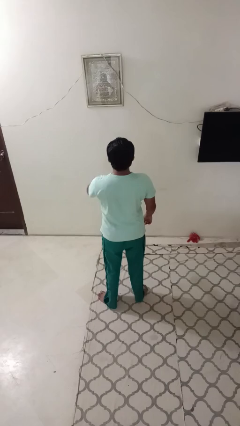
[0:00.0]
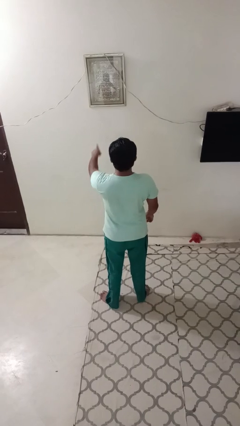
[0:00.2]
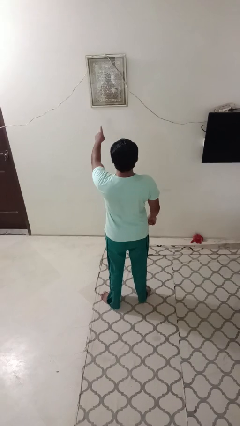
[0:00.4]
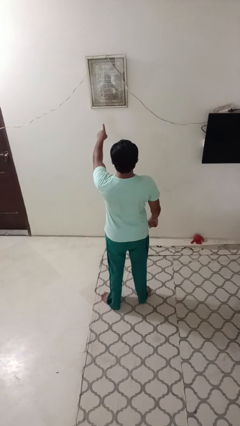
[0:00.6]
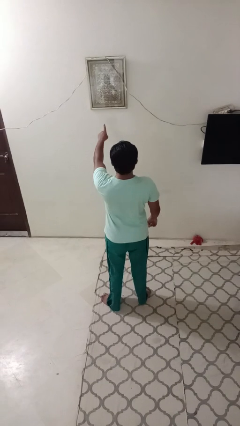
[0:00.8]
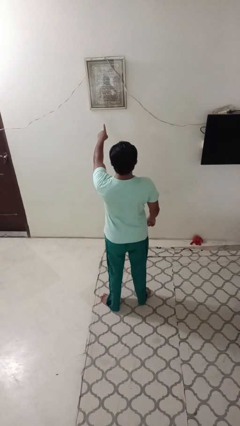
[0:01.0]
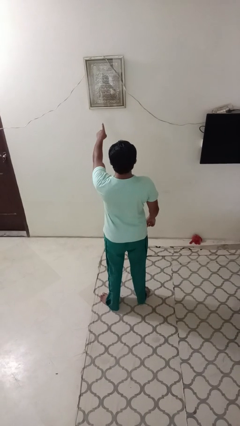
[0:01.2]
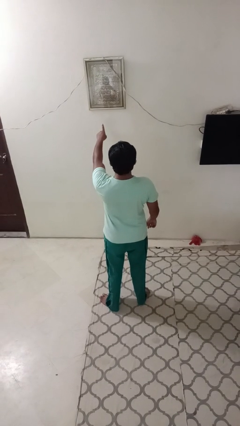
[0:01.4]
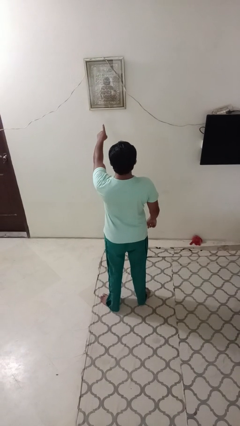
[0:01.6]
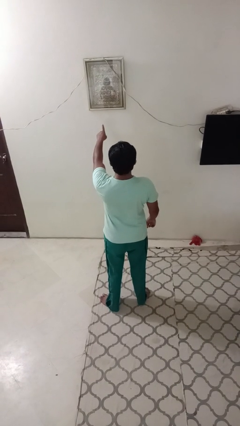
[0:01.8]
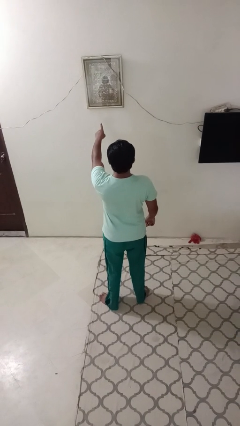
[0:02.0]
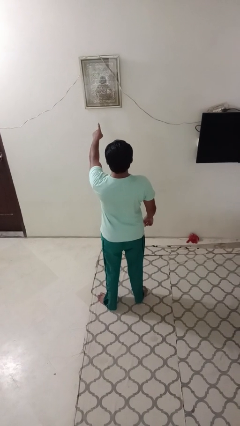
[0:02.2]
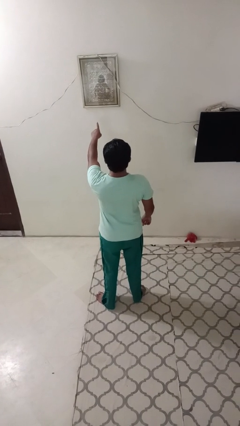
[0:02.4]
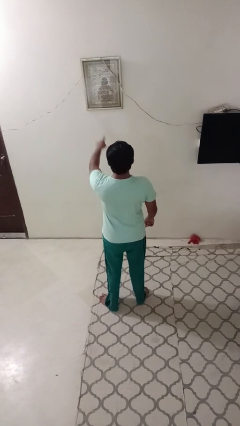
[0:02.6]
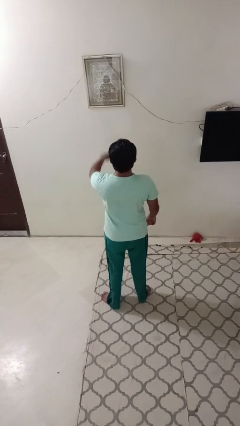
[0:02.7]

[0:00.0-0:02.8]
person points at person

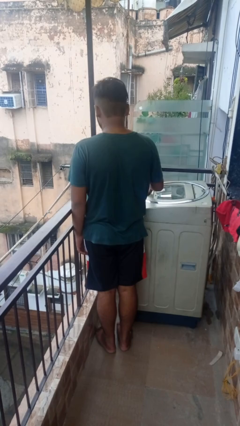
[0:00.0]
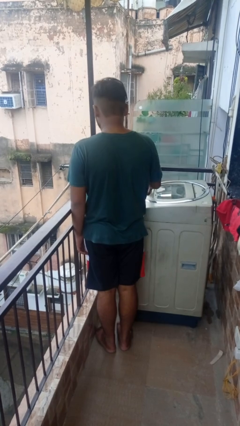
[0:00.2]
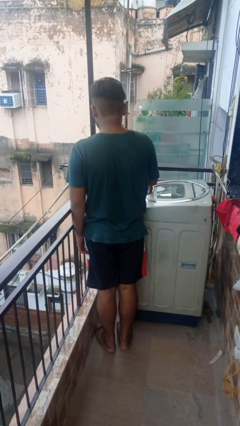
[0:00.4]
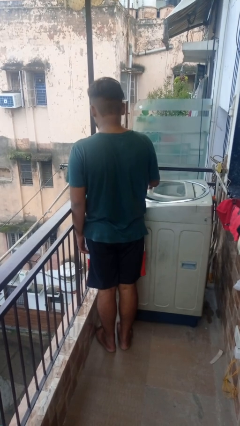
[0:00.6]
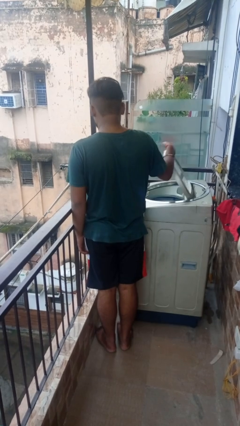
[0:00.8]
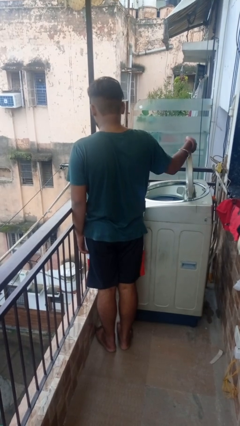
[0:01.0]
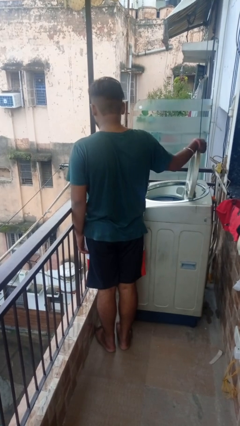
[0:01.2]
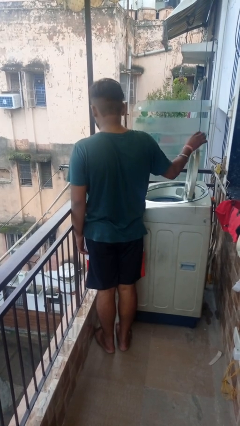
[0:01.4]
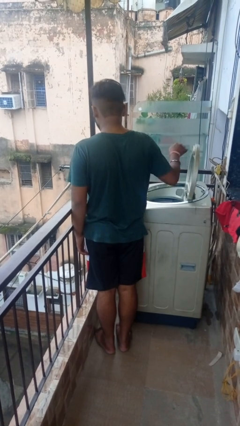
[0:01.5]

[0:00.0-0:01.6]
person opens clothes washer

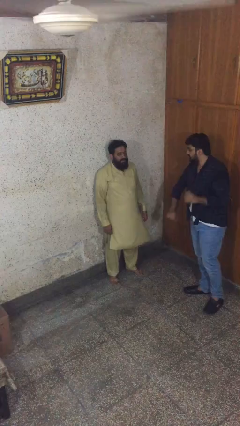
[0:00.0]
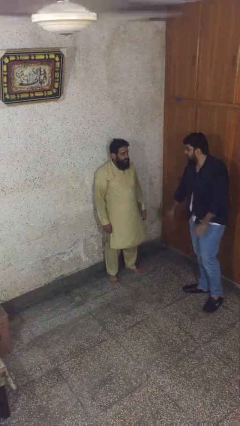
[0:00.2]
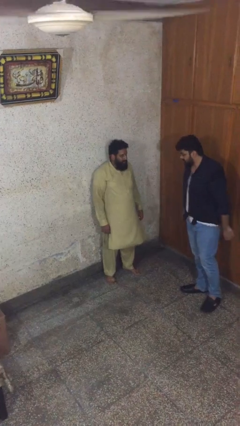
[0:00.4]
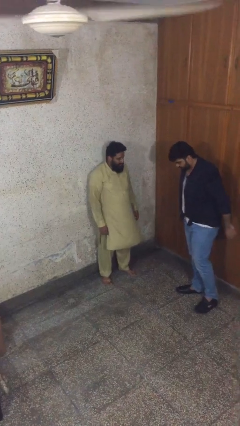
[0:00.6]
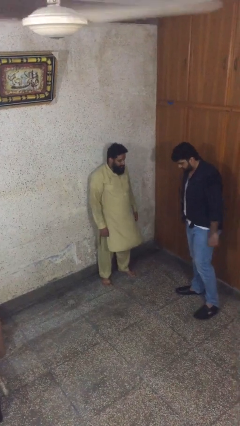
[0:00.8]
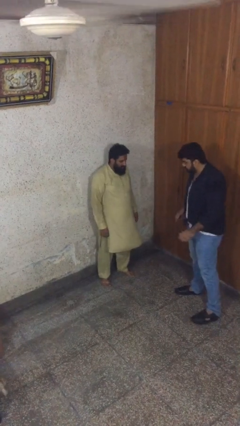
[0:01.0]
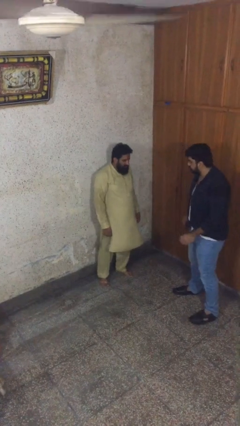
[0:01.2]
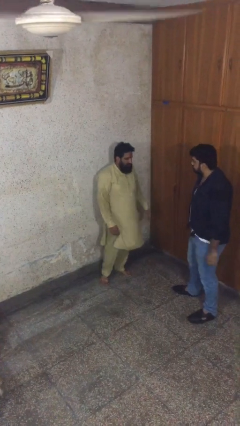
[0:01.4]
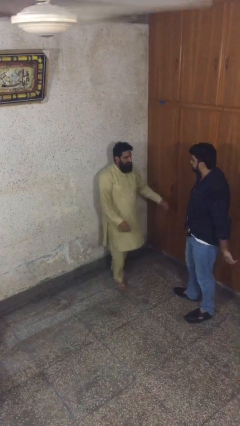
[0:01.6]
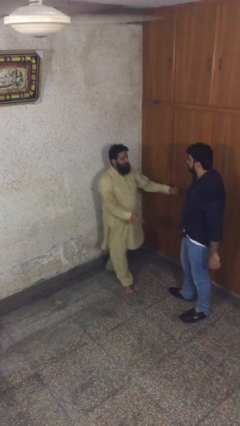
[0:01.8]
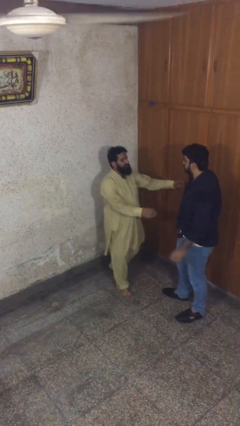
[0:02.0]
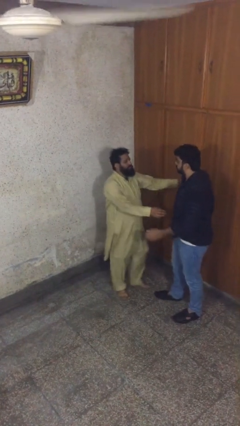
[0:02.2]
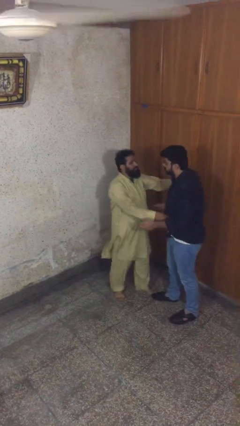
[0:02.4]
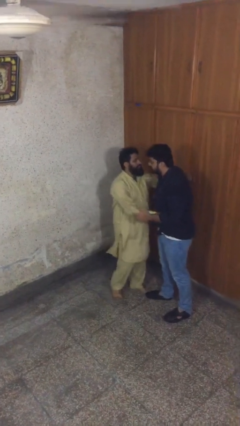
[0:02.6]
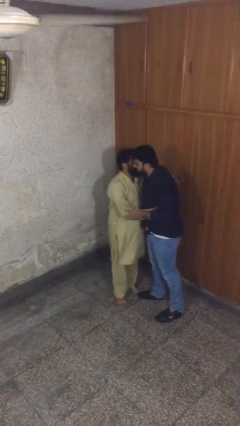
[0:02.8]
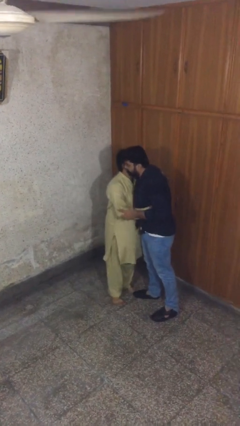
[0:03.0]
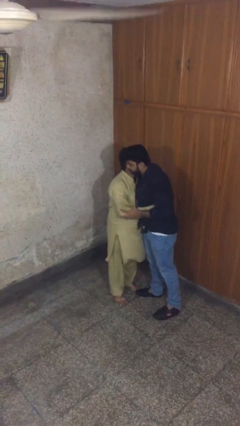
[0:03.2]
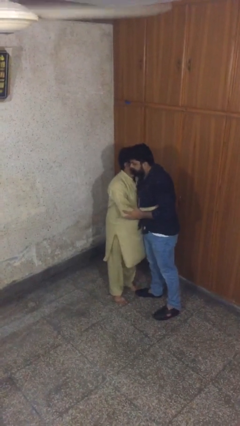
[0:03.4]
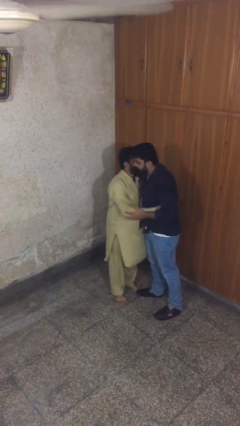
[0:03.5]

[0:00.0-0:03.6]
person embraces person

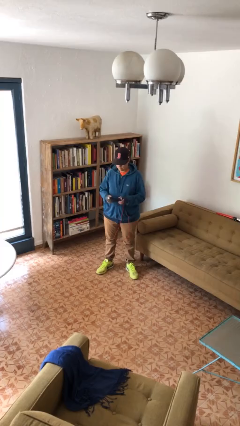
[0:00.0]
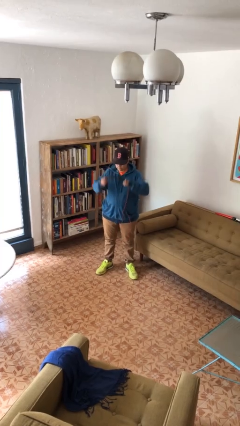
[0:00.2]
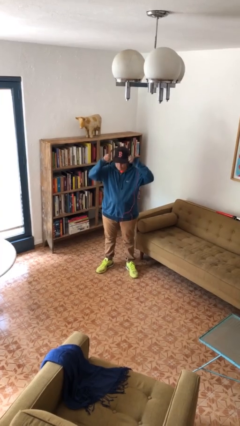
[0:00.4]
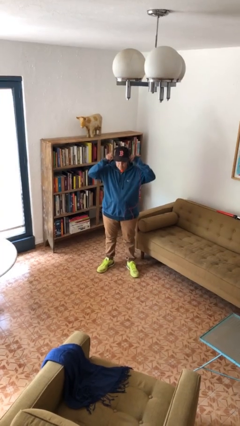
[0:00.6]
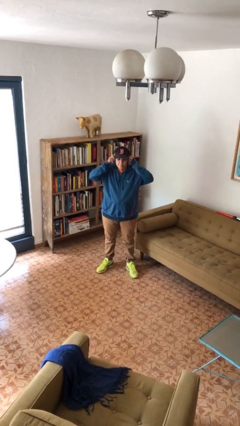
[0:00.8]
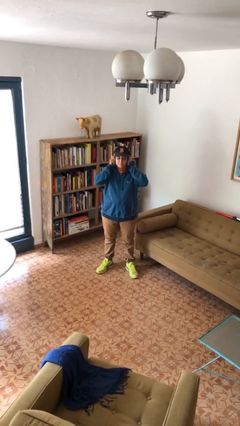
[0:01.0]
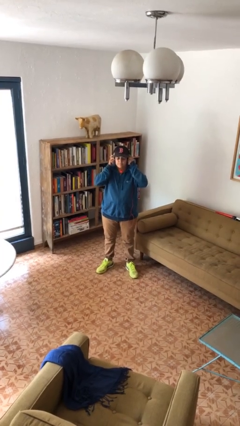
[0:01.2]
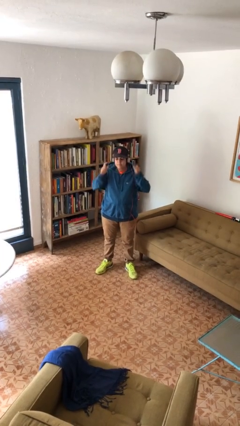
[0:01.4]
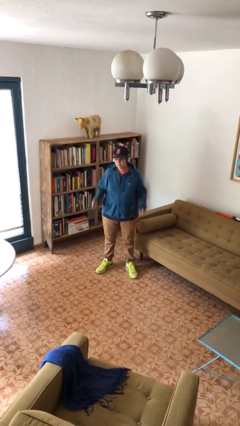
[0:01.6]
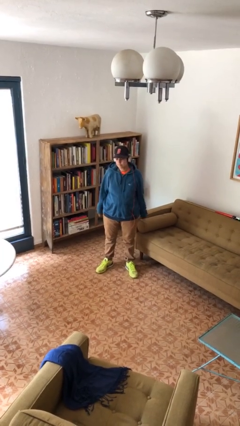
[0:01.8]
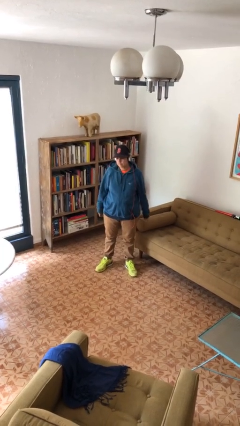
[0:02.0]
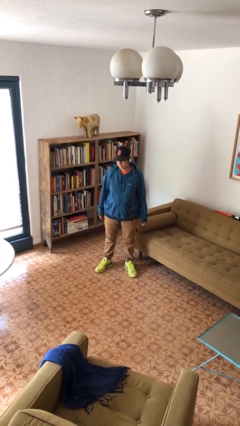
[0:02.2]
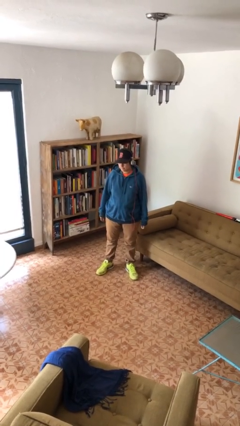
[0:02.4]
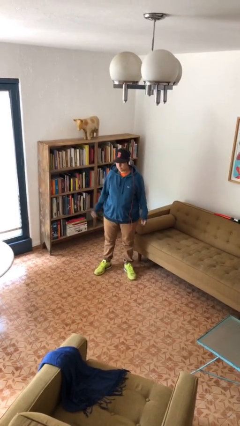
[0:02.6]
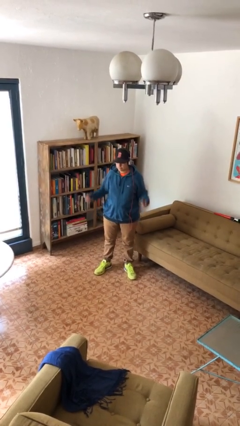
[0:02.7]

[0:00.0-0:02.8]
person puts on headphones

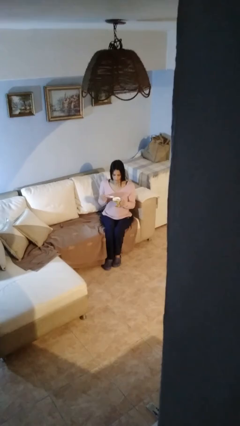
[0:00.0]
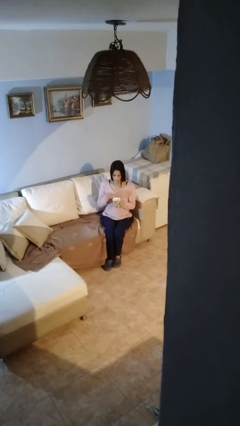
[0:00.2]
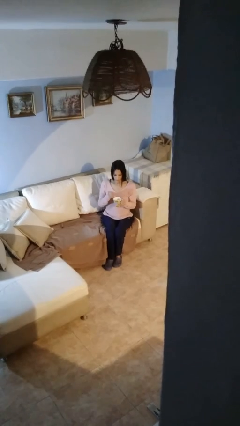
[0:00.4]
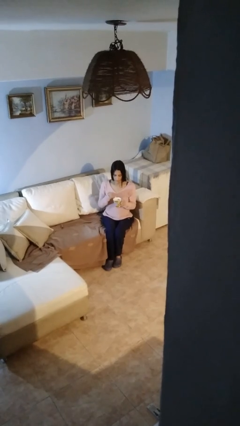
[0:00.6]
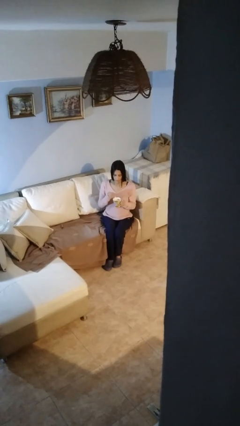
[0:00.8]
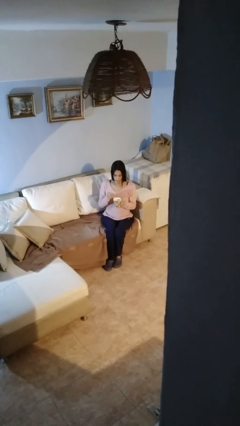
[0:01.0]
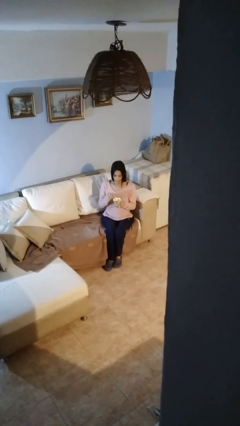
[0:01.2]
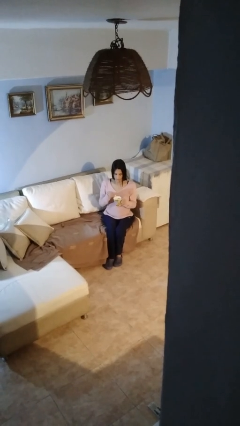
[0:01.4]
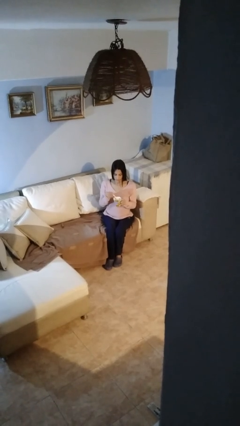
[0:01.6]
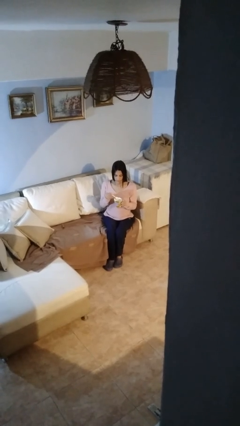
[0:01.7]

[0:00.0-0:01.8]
person stirs mug

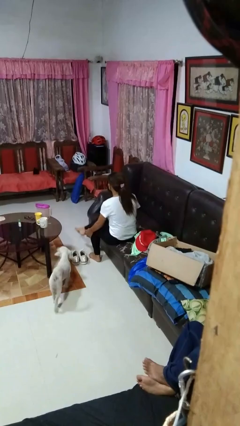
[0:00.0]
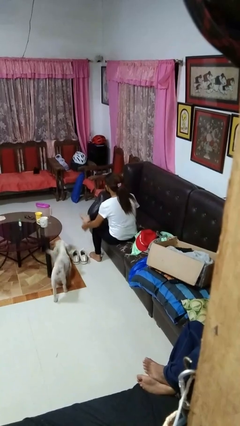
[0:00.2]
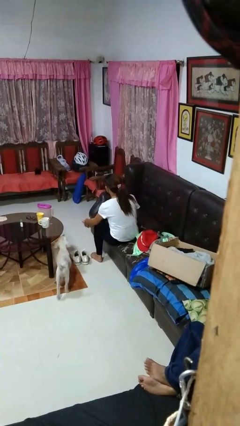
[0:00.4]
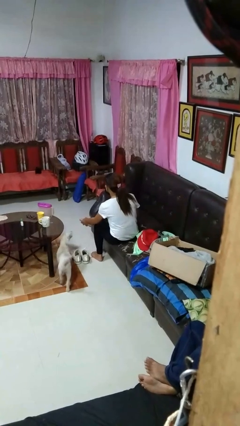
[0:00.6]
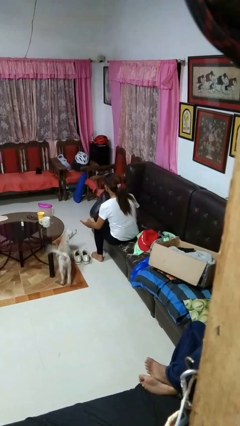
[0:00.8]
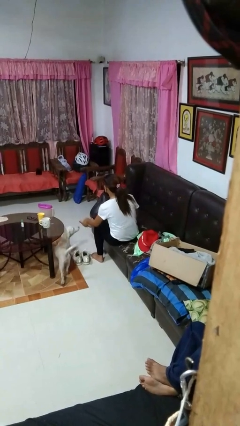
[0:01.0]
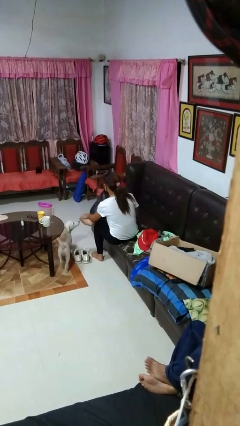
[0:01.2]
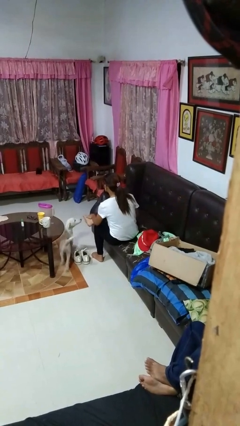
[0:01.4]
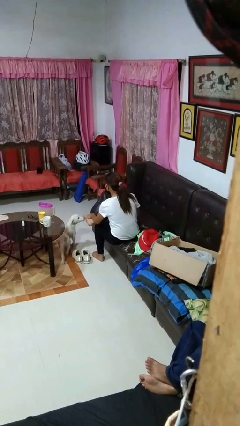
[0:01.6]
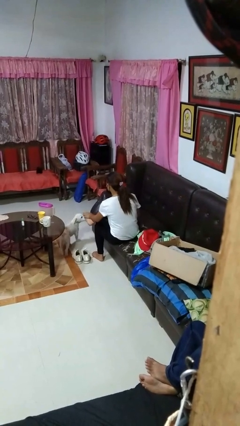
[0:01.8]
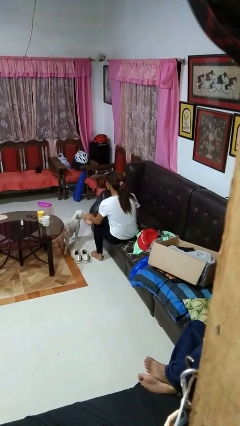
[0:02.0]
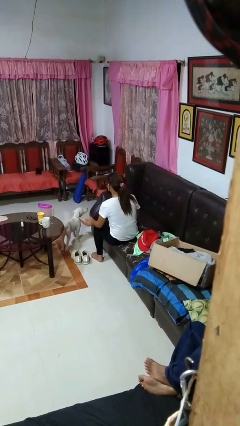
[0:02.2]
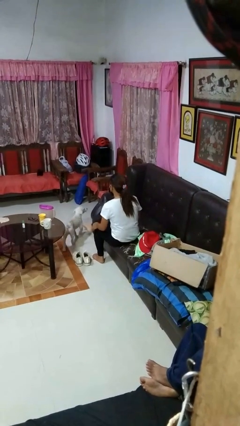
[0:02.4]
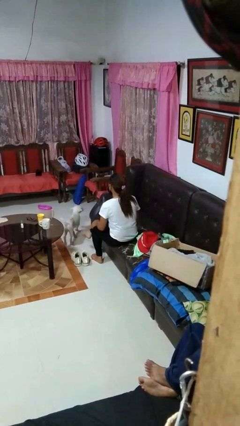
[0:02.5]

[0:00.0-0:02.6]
person rubs foot

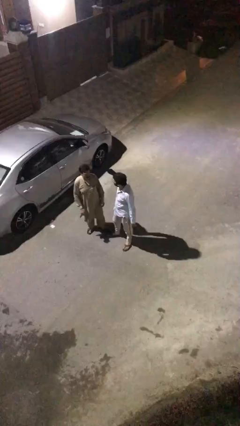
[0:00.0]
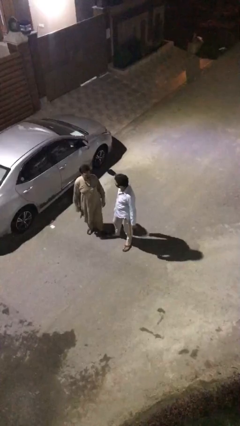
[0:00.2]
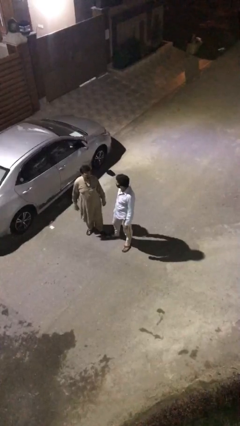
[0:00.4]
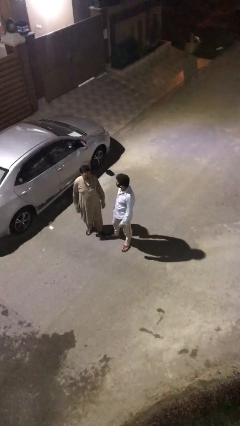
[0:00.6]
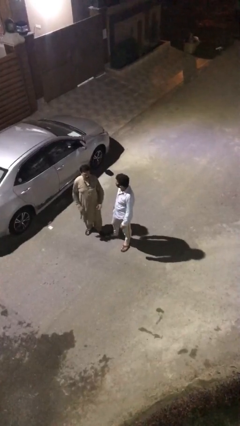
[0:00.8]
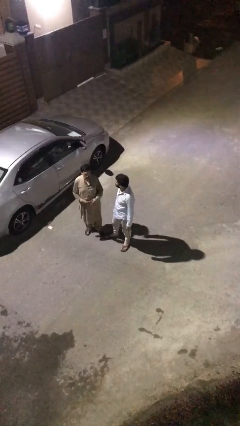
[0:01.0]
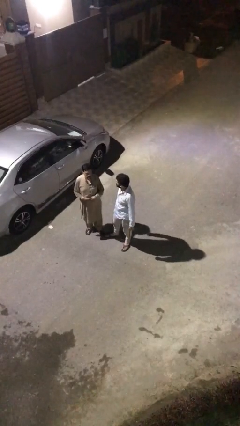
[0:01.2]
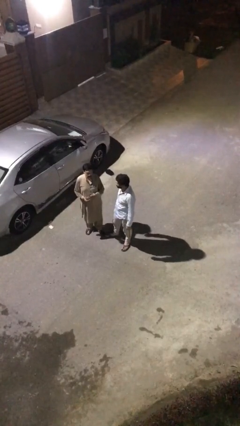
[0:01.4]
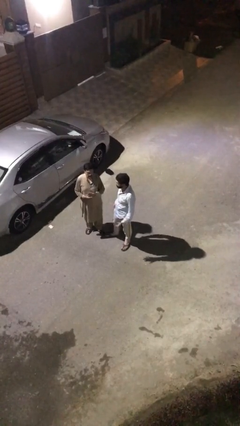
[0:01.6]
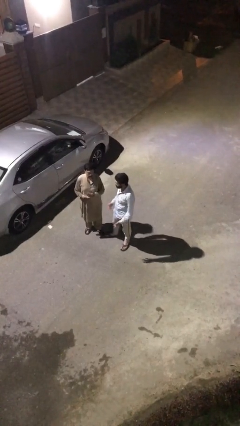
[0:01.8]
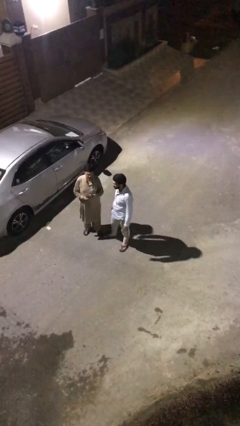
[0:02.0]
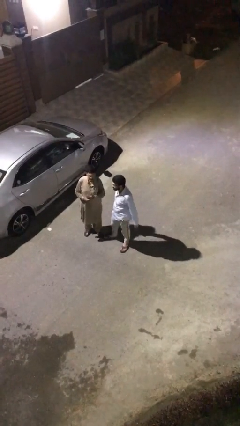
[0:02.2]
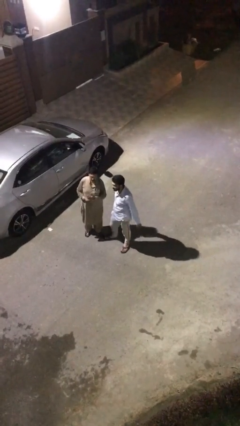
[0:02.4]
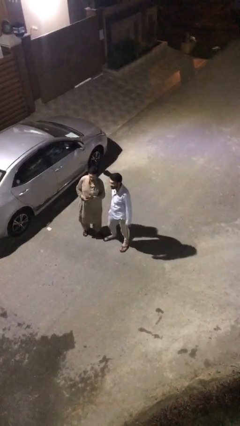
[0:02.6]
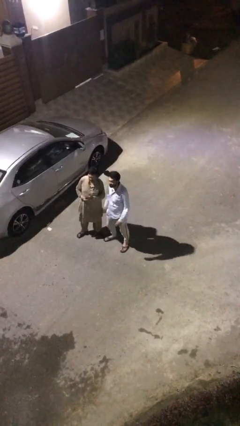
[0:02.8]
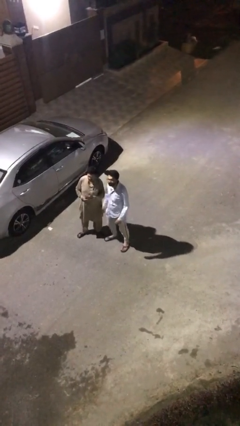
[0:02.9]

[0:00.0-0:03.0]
person talks to person
